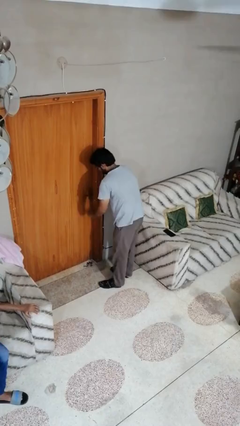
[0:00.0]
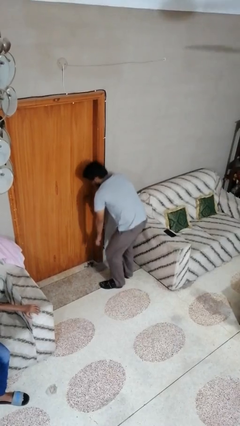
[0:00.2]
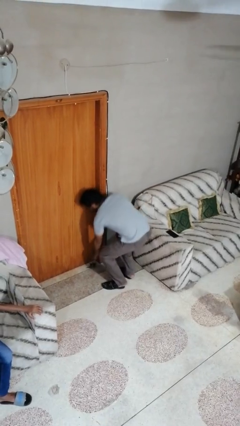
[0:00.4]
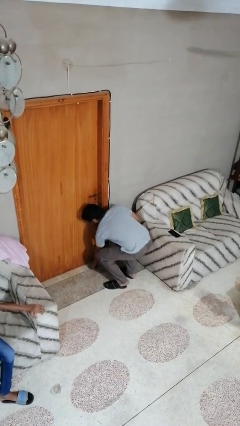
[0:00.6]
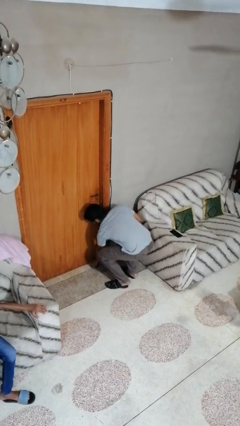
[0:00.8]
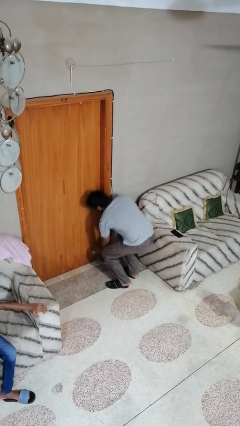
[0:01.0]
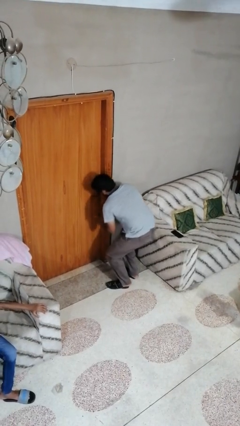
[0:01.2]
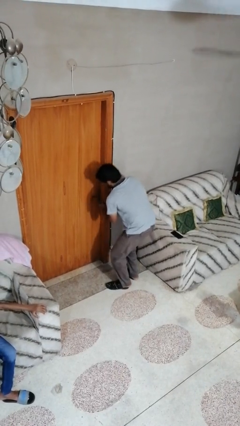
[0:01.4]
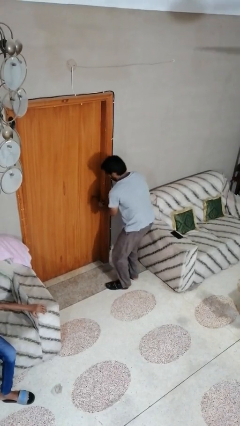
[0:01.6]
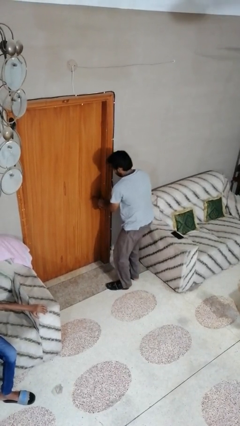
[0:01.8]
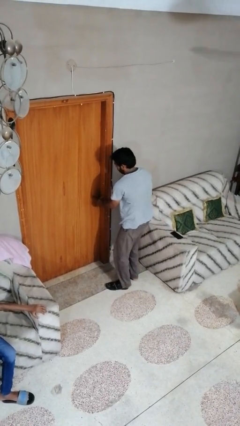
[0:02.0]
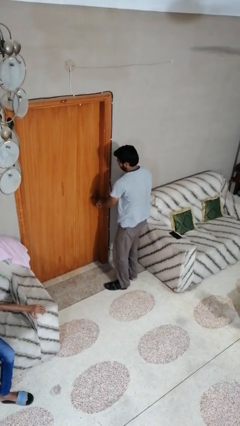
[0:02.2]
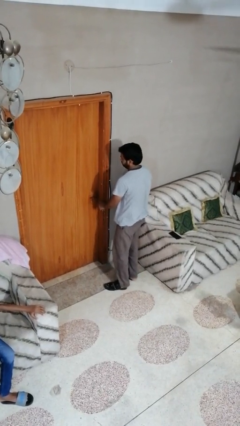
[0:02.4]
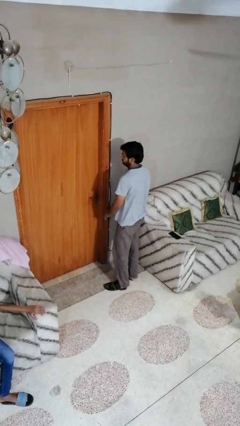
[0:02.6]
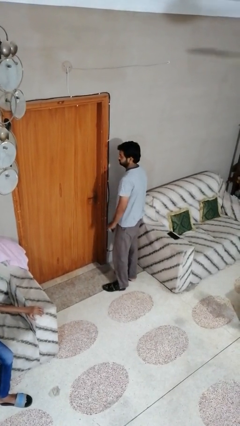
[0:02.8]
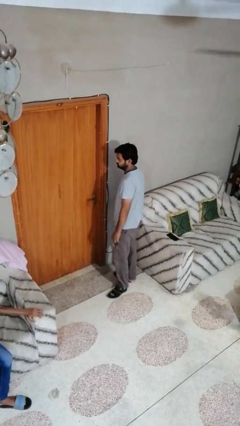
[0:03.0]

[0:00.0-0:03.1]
person locks door with keys

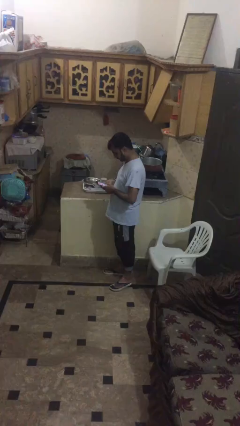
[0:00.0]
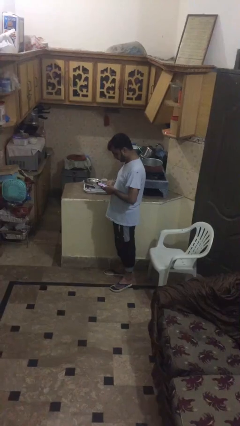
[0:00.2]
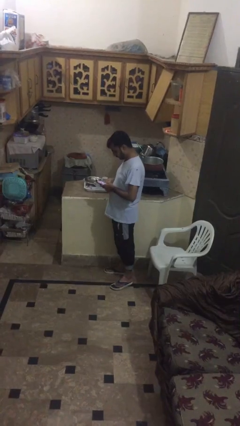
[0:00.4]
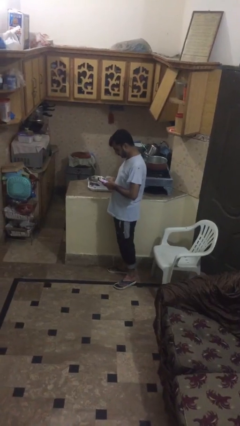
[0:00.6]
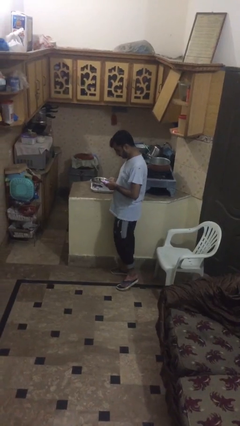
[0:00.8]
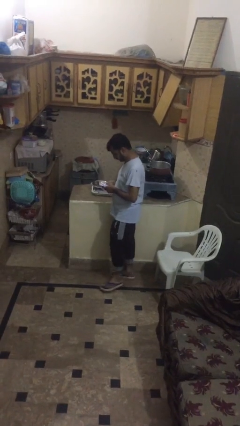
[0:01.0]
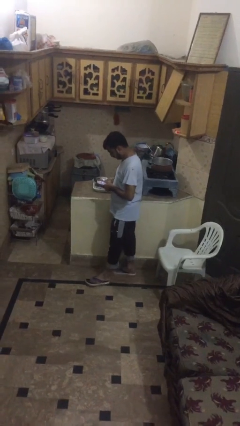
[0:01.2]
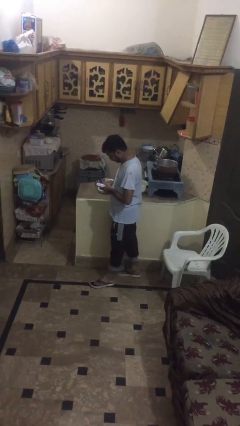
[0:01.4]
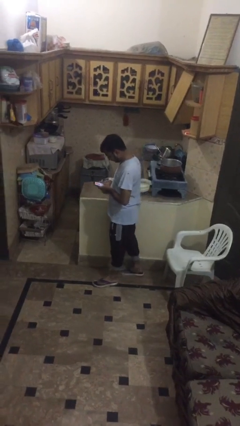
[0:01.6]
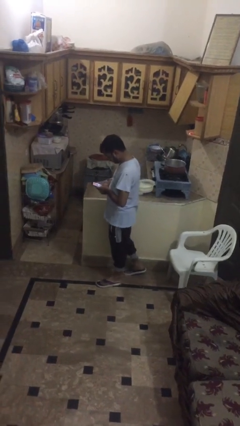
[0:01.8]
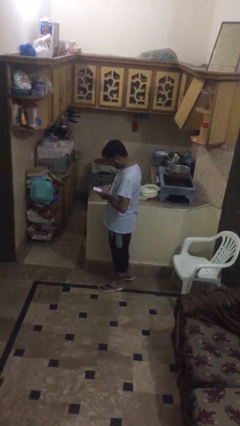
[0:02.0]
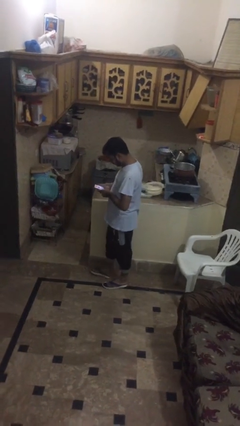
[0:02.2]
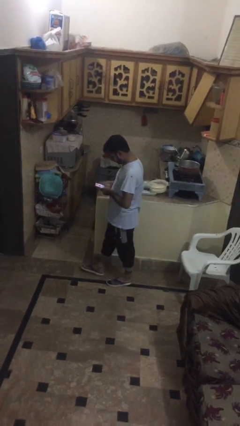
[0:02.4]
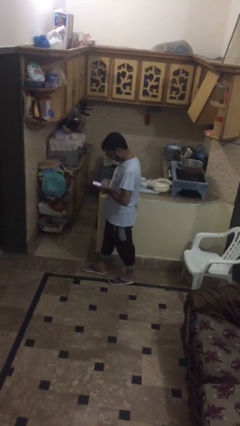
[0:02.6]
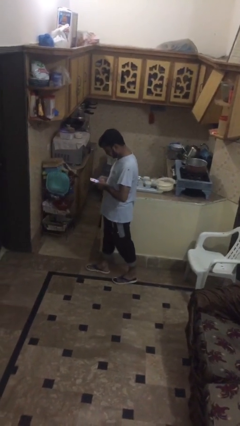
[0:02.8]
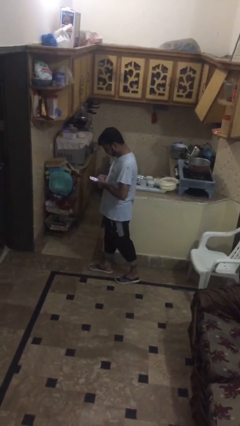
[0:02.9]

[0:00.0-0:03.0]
person texts on phone

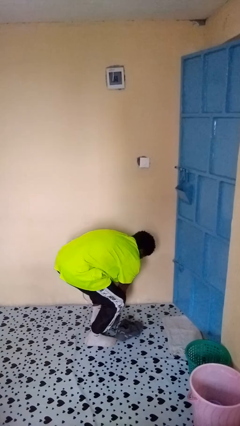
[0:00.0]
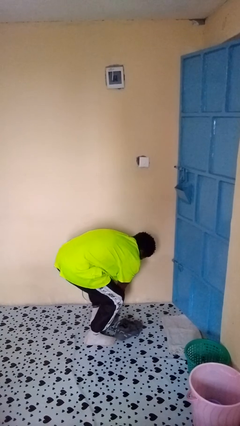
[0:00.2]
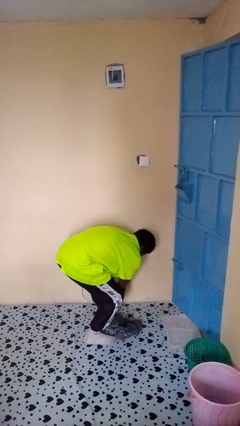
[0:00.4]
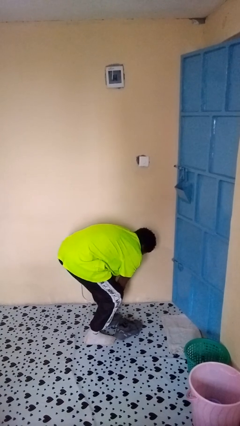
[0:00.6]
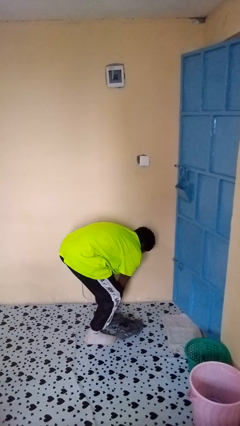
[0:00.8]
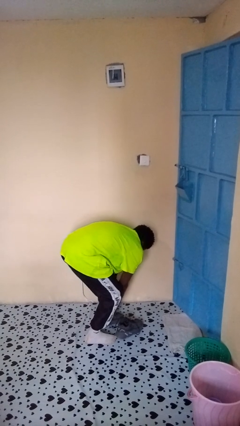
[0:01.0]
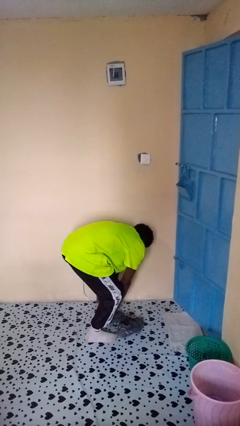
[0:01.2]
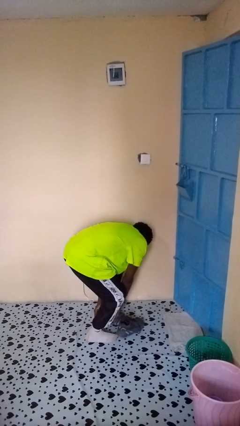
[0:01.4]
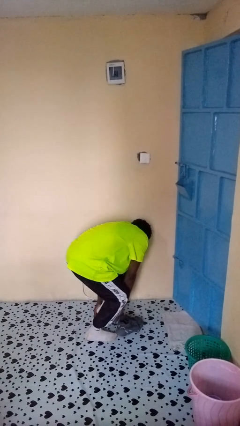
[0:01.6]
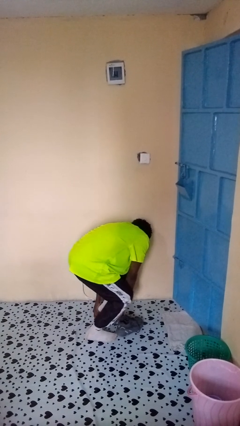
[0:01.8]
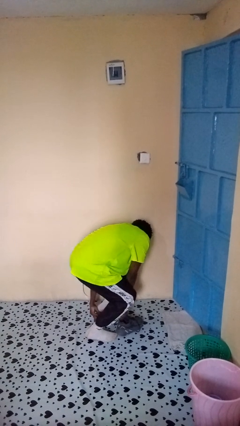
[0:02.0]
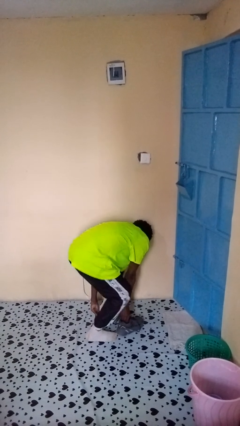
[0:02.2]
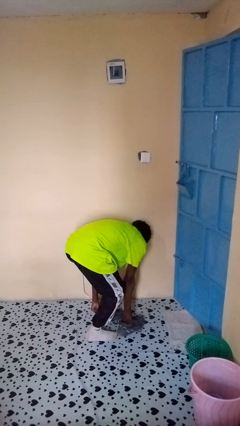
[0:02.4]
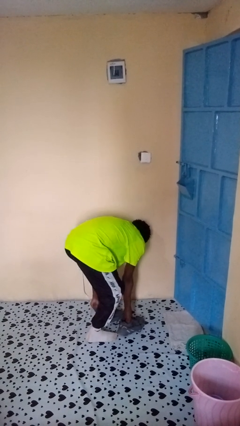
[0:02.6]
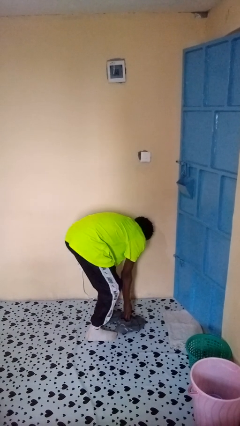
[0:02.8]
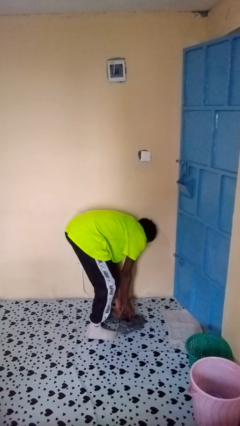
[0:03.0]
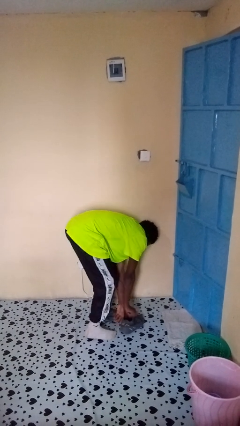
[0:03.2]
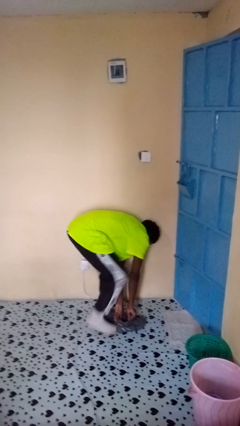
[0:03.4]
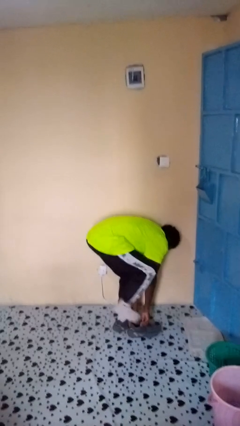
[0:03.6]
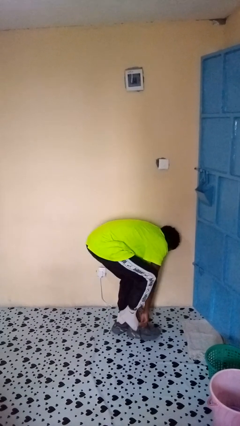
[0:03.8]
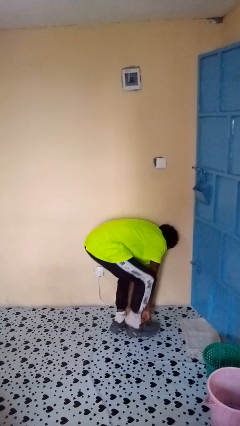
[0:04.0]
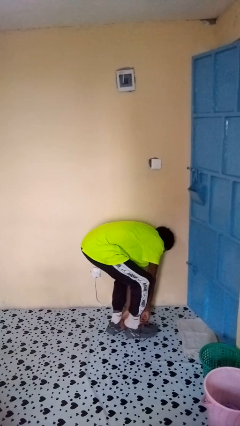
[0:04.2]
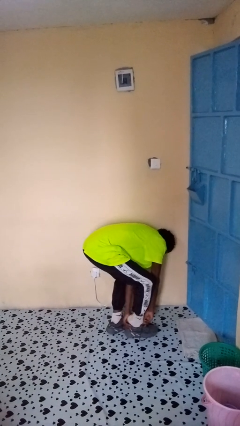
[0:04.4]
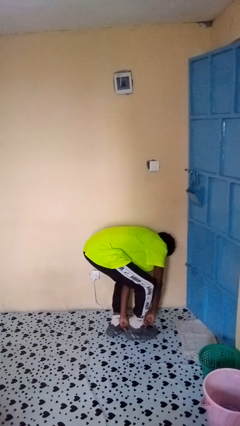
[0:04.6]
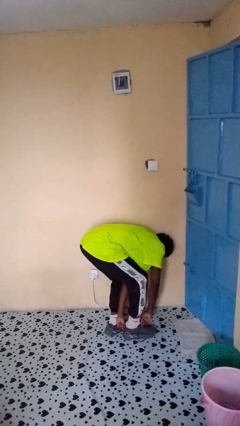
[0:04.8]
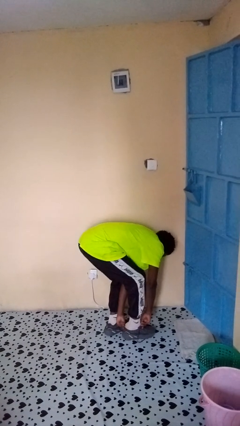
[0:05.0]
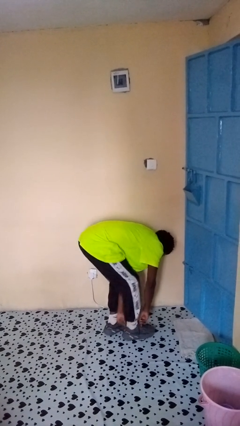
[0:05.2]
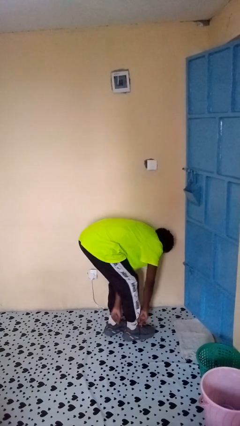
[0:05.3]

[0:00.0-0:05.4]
person puts on shoes

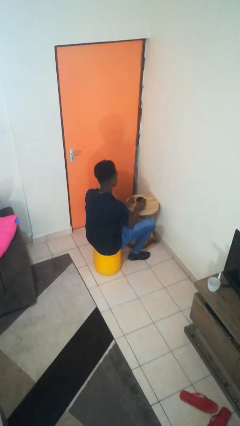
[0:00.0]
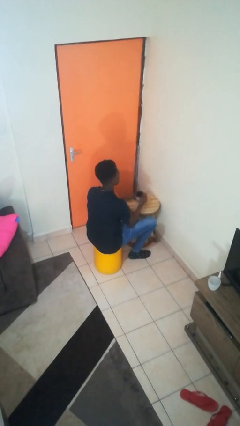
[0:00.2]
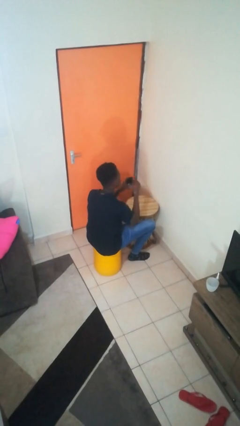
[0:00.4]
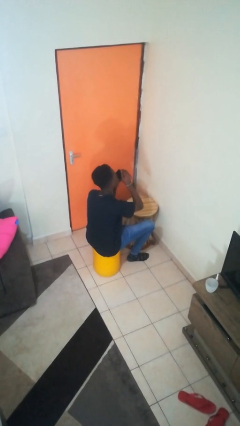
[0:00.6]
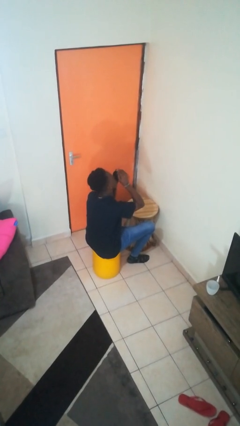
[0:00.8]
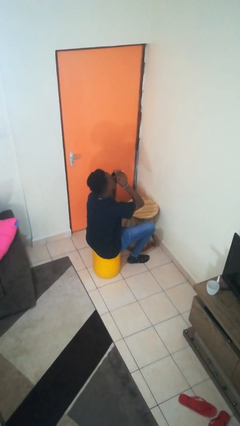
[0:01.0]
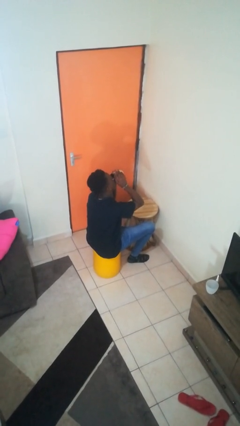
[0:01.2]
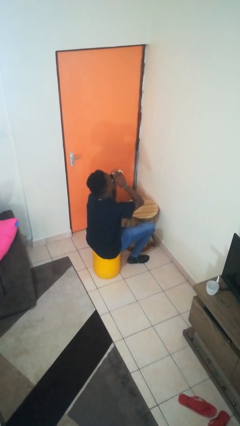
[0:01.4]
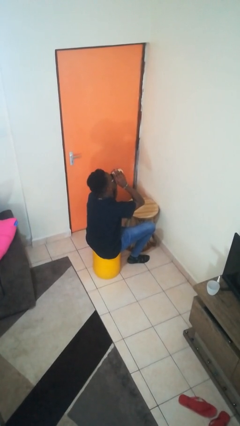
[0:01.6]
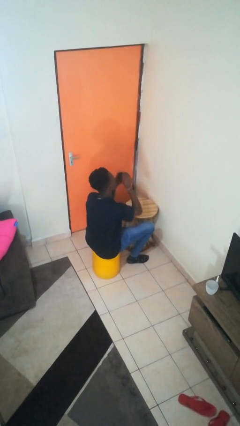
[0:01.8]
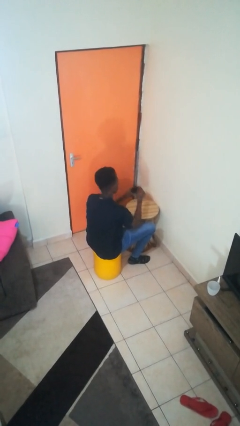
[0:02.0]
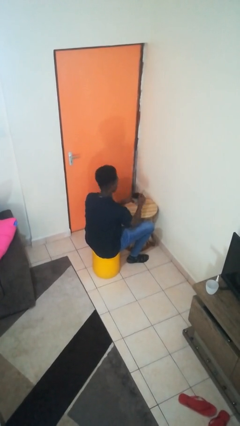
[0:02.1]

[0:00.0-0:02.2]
person drinks from mug

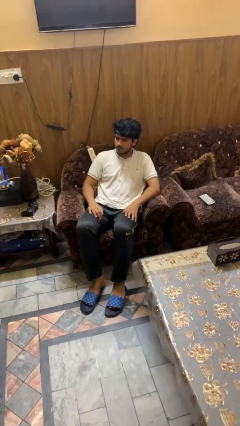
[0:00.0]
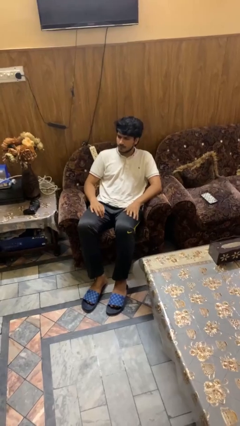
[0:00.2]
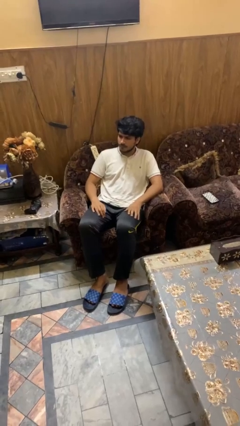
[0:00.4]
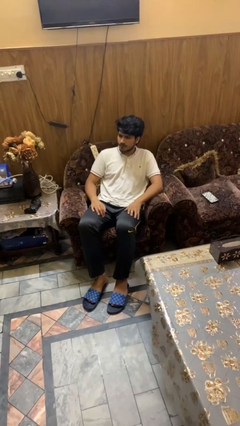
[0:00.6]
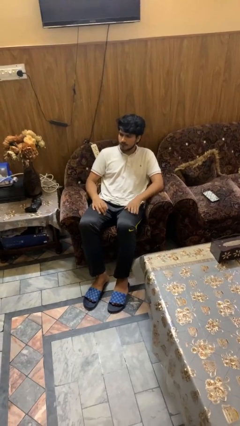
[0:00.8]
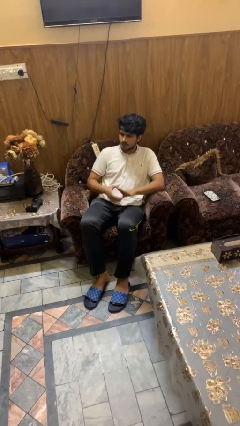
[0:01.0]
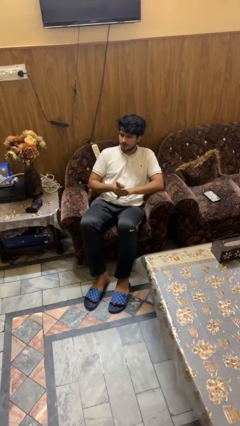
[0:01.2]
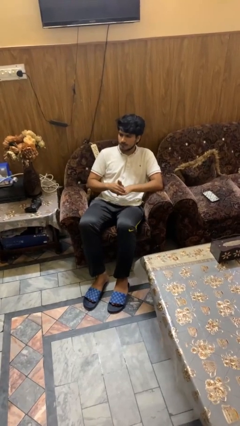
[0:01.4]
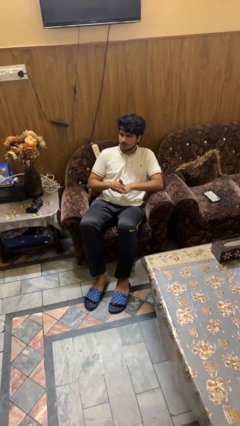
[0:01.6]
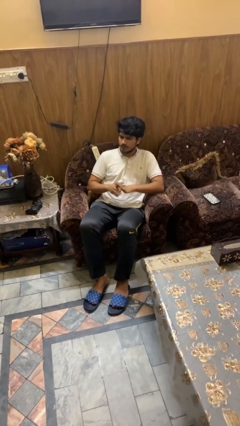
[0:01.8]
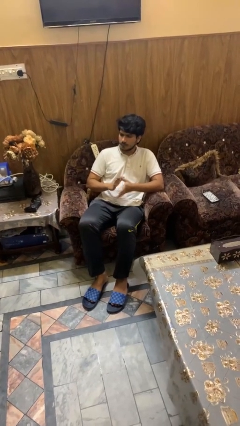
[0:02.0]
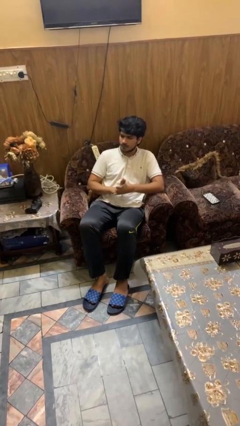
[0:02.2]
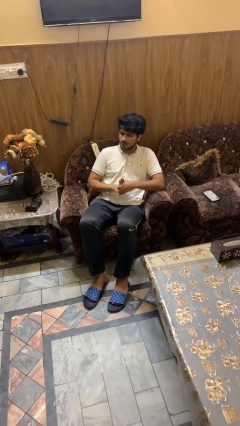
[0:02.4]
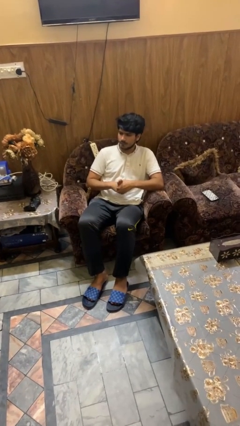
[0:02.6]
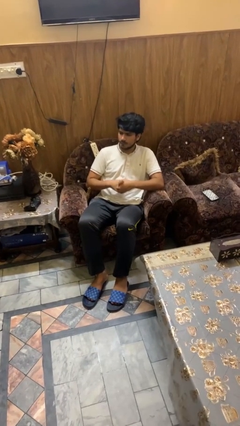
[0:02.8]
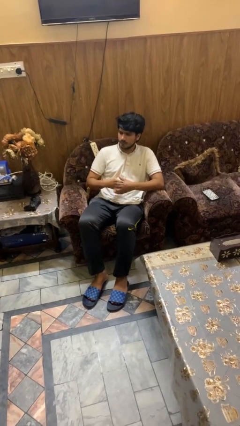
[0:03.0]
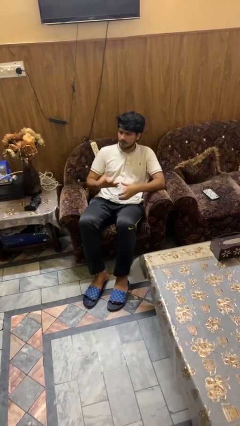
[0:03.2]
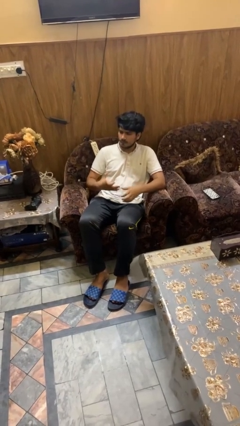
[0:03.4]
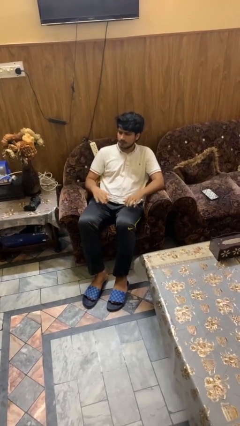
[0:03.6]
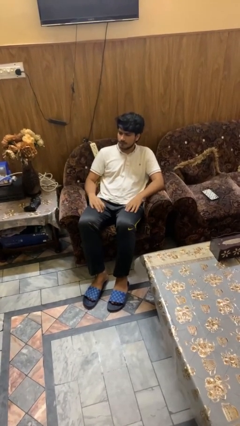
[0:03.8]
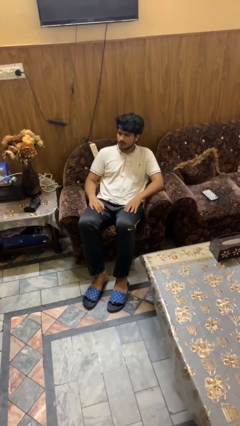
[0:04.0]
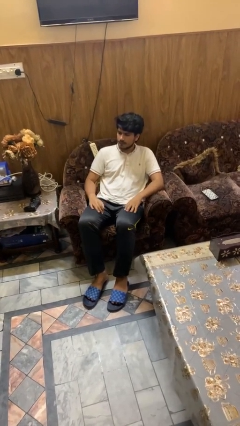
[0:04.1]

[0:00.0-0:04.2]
person cracks knuckles
